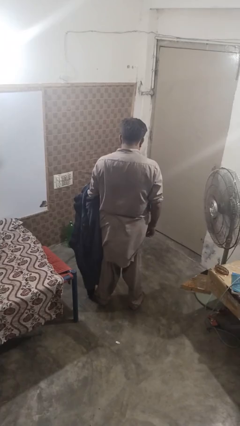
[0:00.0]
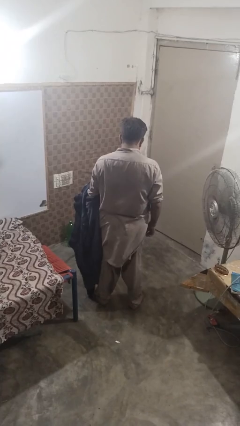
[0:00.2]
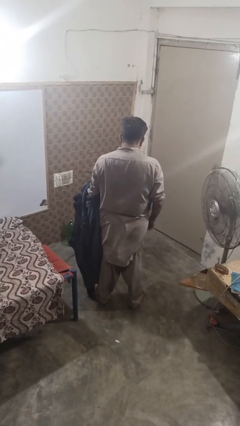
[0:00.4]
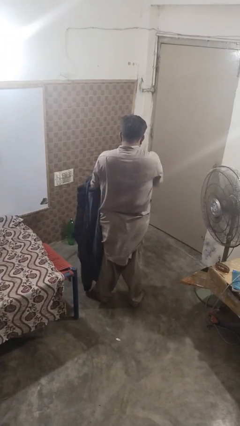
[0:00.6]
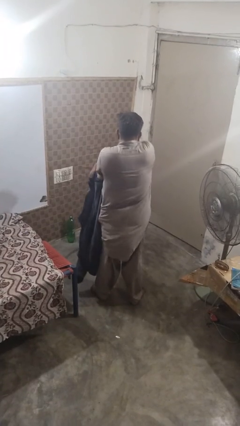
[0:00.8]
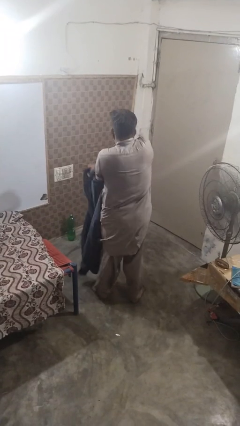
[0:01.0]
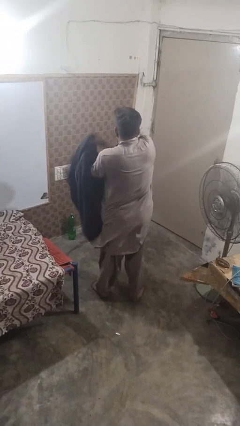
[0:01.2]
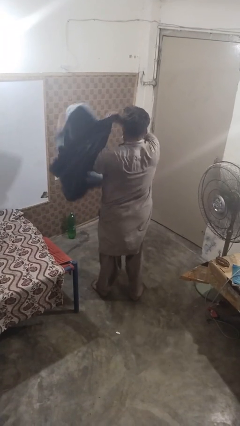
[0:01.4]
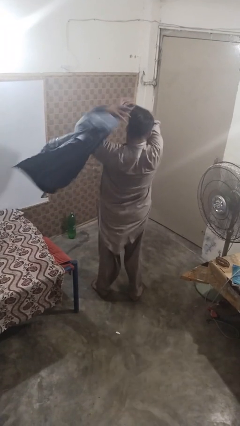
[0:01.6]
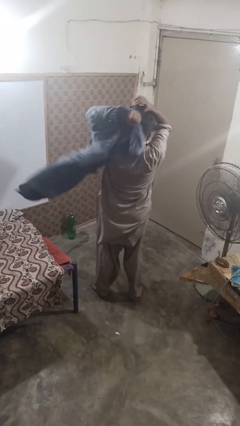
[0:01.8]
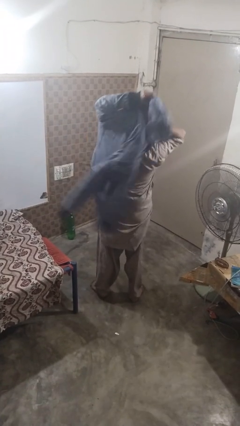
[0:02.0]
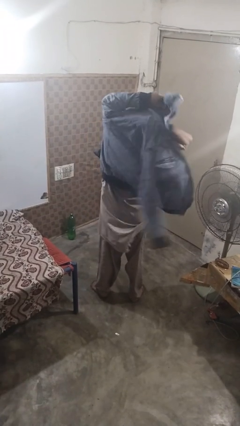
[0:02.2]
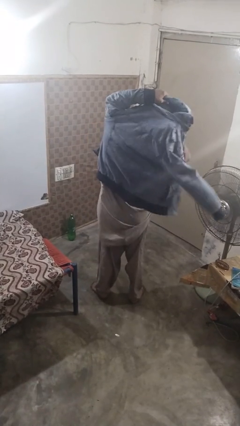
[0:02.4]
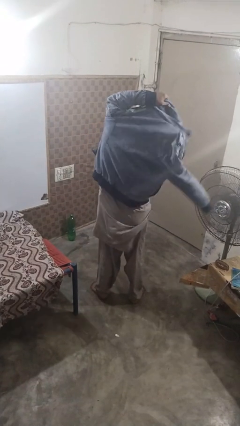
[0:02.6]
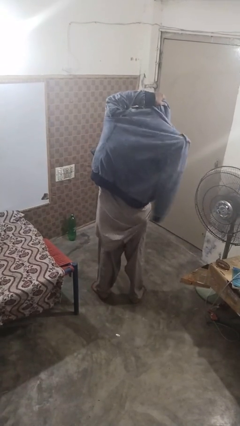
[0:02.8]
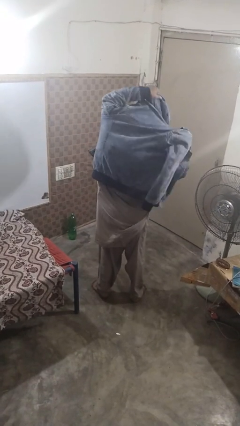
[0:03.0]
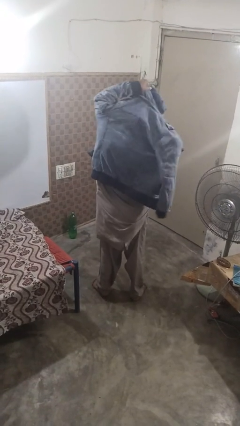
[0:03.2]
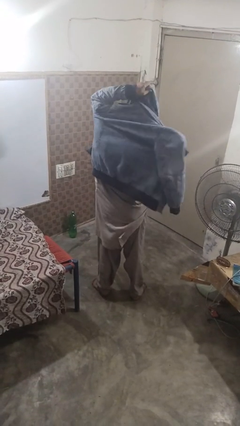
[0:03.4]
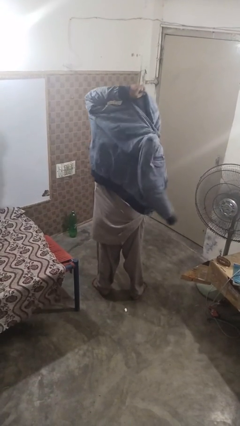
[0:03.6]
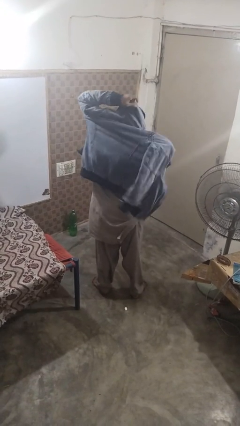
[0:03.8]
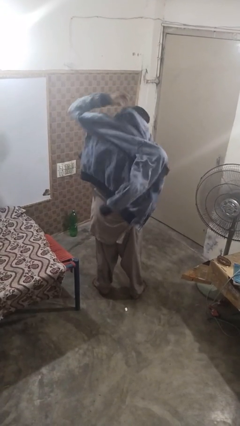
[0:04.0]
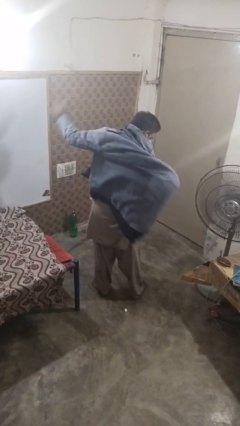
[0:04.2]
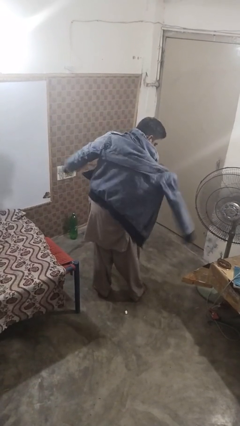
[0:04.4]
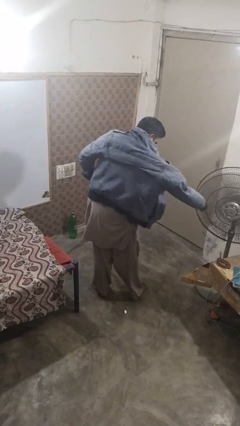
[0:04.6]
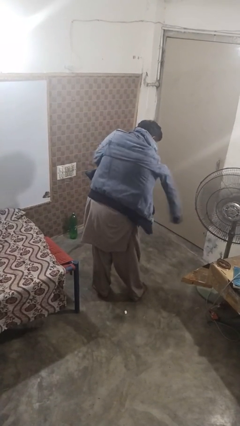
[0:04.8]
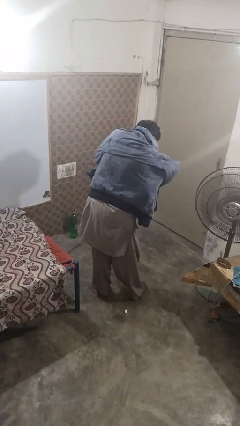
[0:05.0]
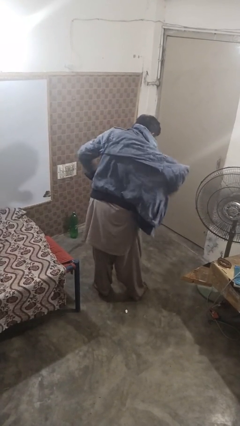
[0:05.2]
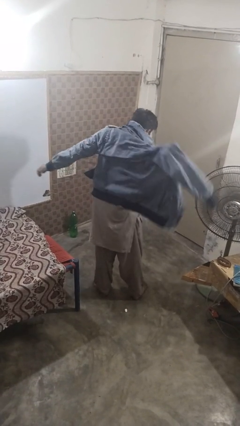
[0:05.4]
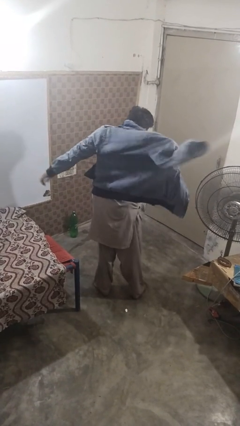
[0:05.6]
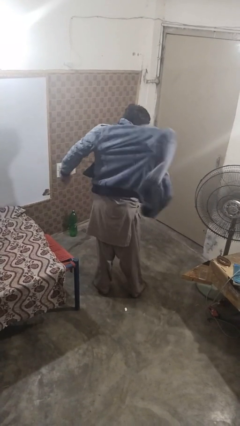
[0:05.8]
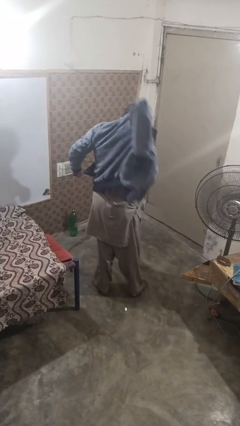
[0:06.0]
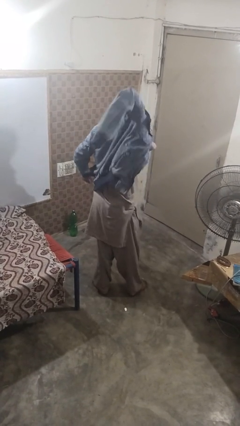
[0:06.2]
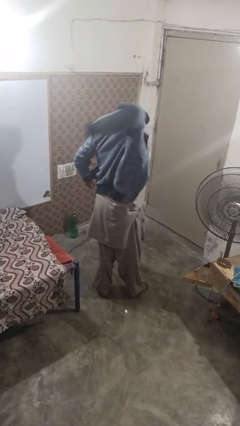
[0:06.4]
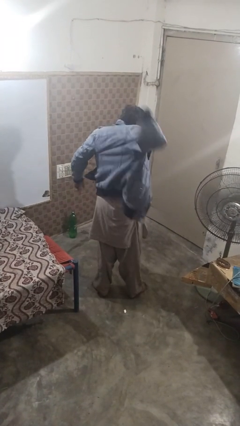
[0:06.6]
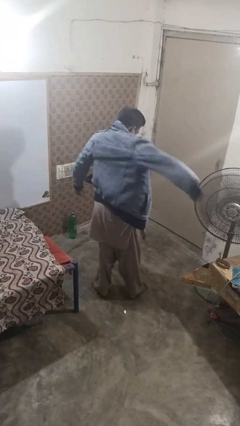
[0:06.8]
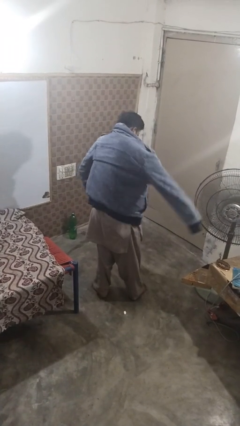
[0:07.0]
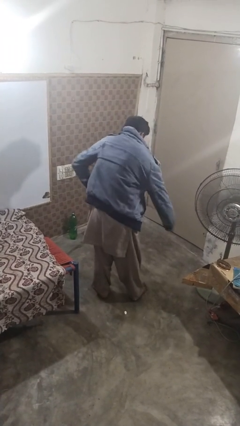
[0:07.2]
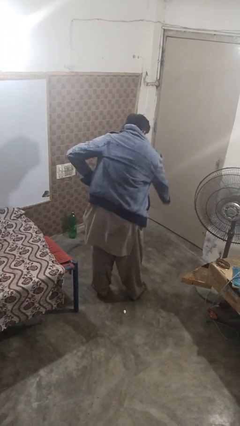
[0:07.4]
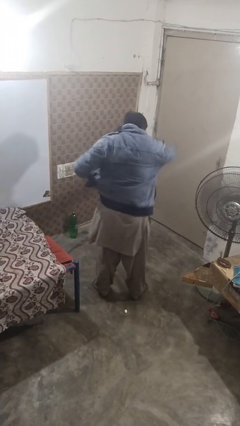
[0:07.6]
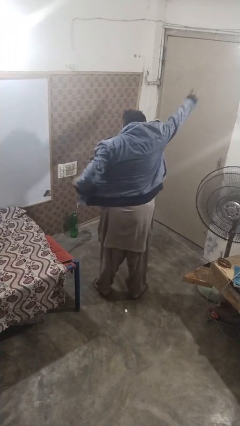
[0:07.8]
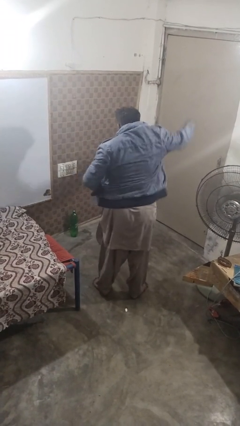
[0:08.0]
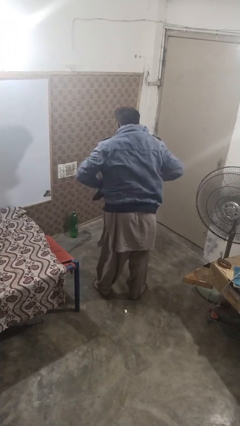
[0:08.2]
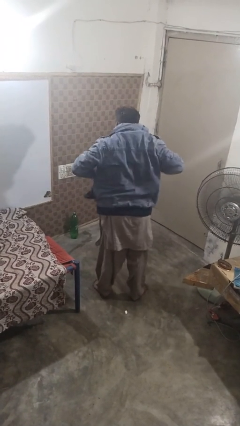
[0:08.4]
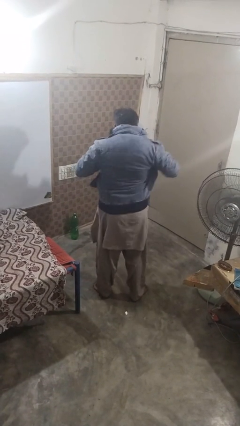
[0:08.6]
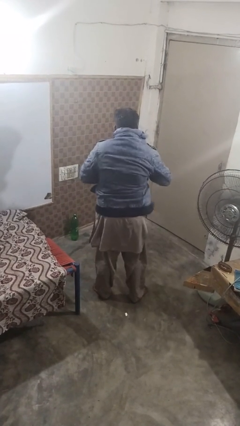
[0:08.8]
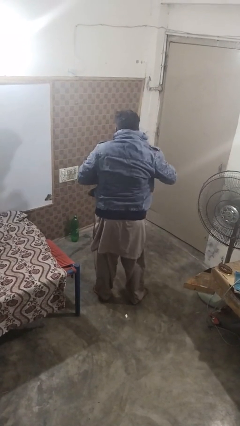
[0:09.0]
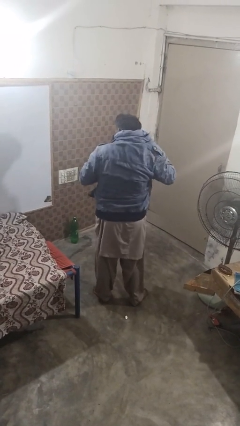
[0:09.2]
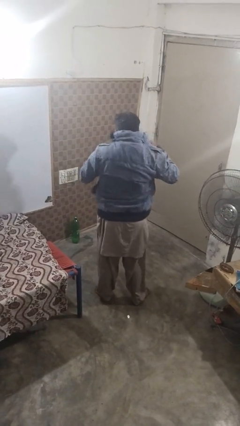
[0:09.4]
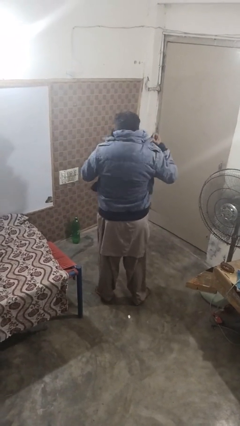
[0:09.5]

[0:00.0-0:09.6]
person puts on jacket

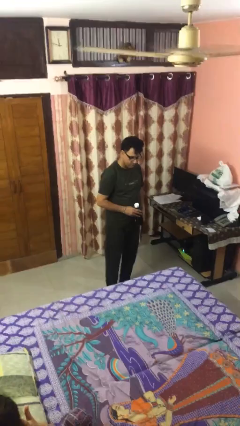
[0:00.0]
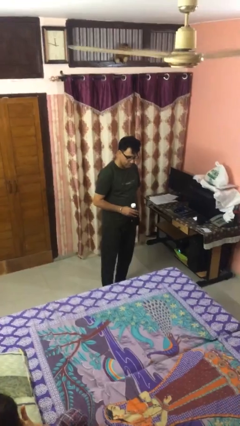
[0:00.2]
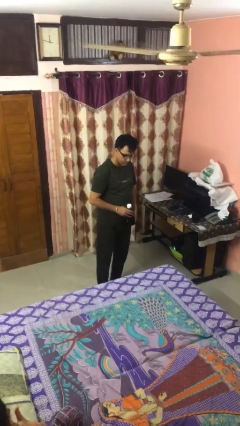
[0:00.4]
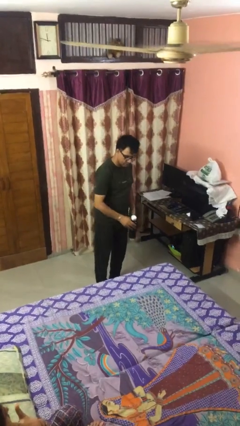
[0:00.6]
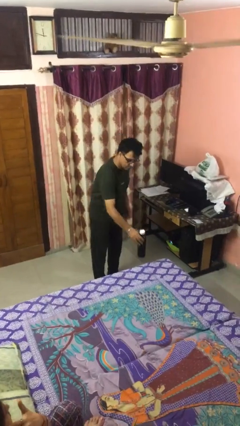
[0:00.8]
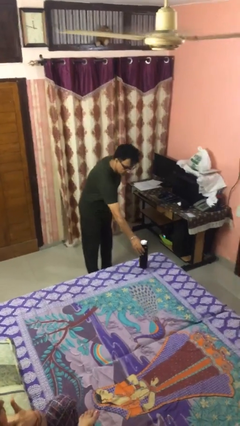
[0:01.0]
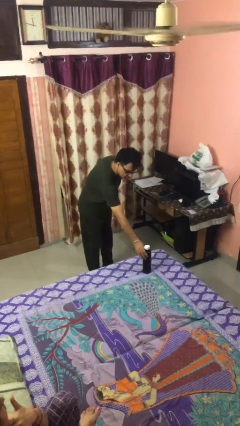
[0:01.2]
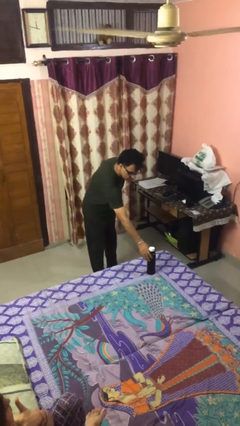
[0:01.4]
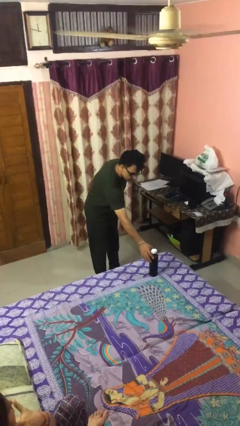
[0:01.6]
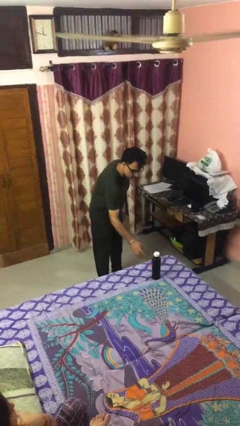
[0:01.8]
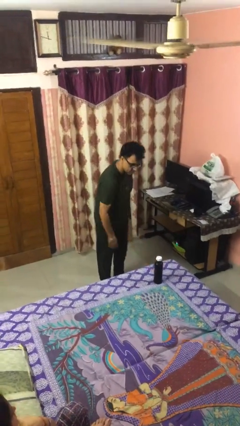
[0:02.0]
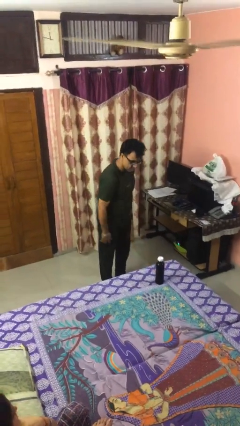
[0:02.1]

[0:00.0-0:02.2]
person puts down object on bed

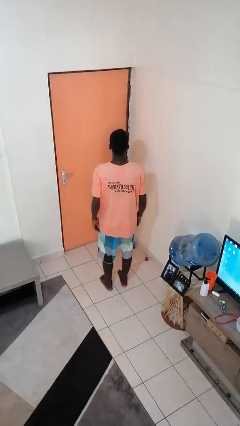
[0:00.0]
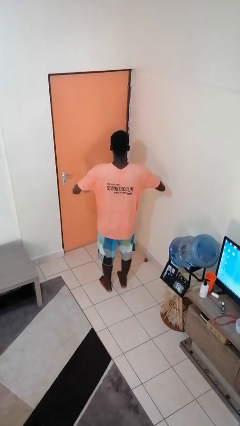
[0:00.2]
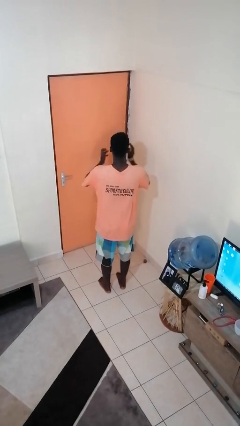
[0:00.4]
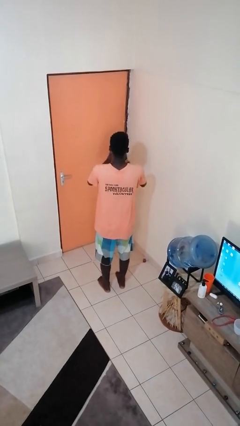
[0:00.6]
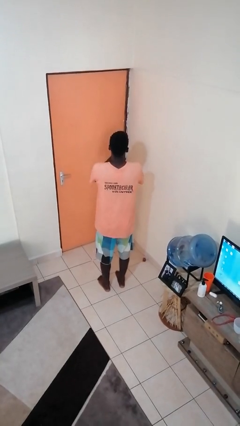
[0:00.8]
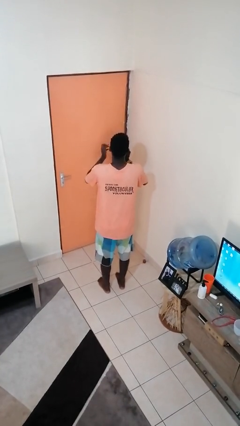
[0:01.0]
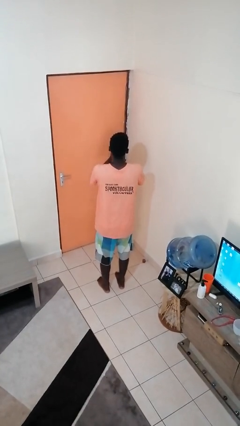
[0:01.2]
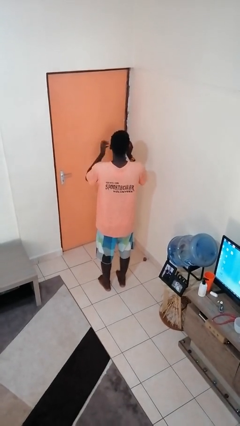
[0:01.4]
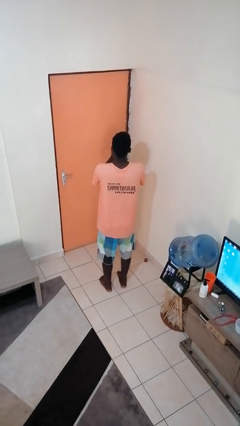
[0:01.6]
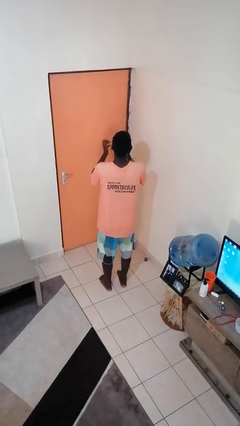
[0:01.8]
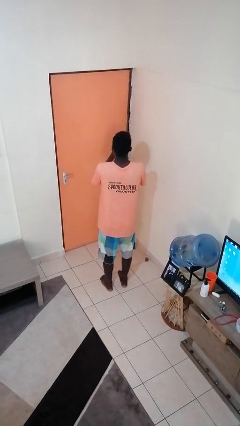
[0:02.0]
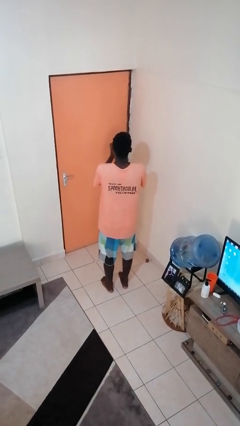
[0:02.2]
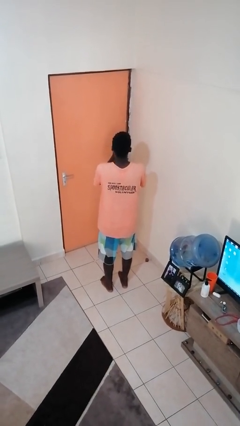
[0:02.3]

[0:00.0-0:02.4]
person claps hands

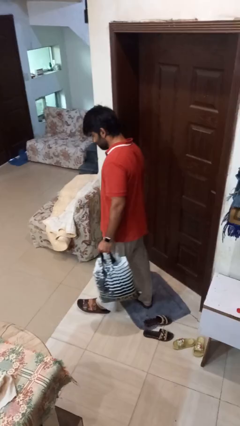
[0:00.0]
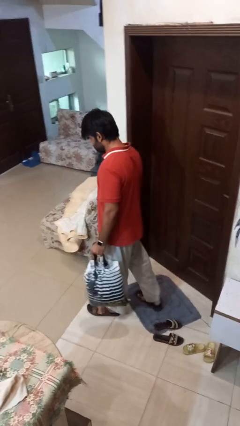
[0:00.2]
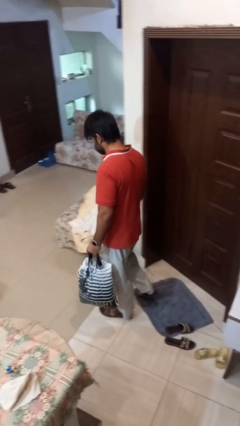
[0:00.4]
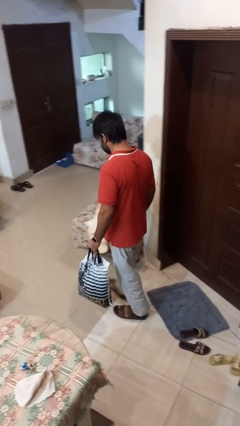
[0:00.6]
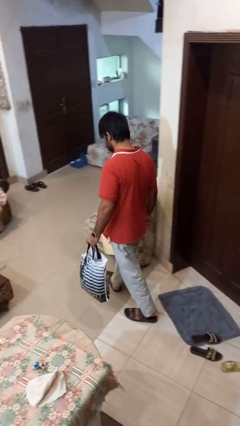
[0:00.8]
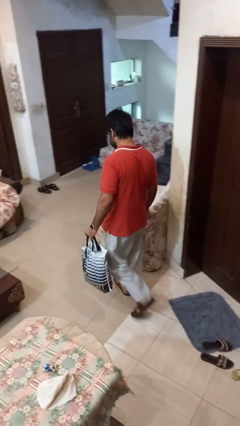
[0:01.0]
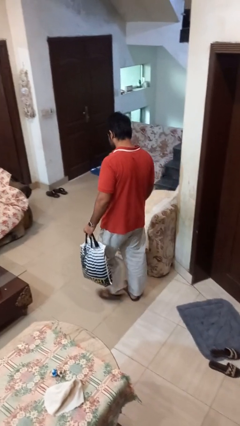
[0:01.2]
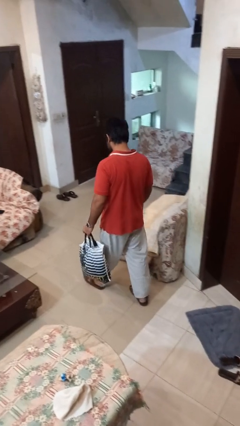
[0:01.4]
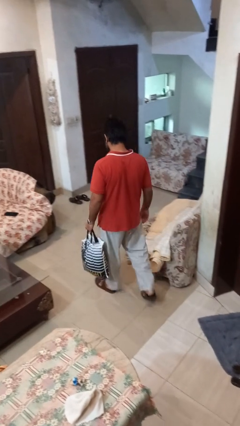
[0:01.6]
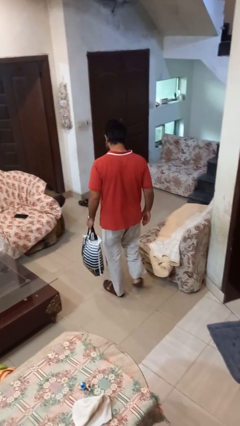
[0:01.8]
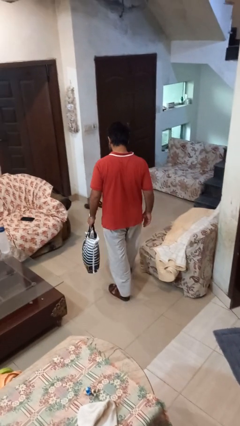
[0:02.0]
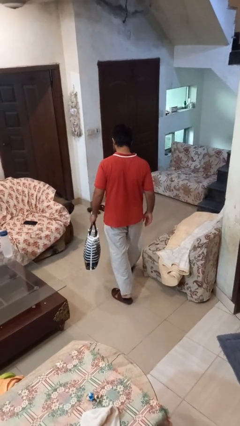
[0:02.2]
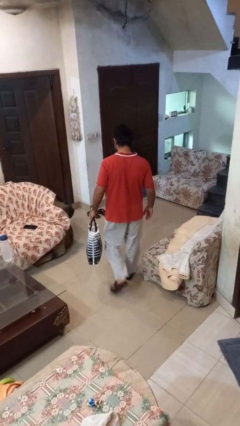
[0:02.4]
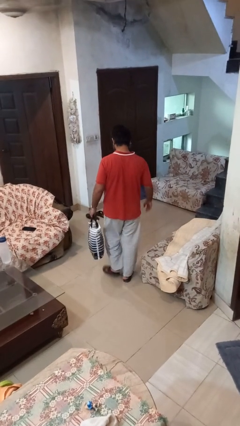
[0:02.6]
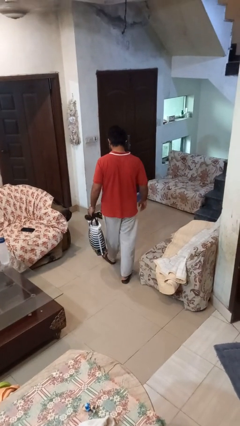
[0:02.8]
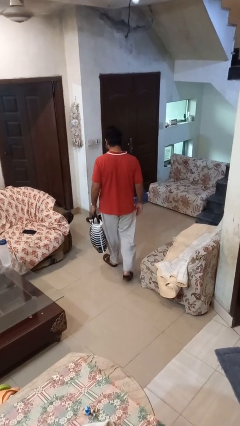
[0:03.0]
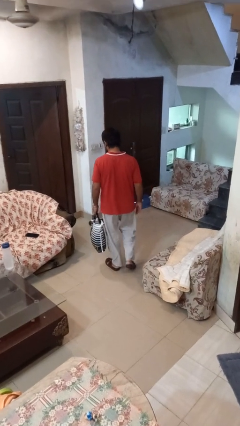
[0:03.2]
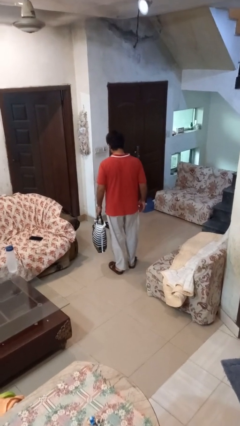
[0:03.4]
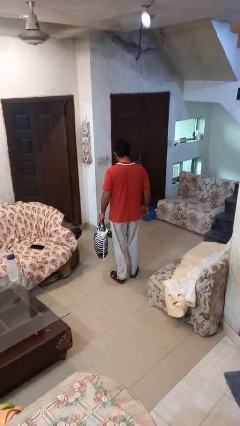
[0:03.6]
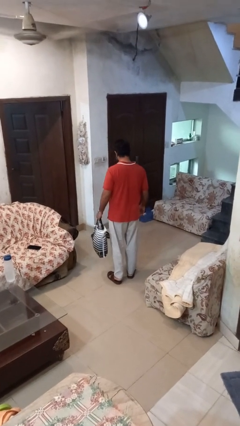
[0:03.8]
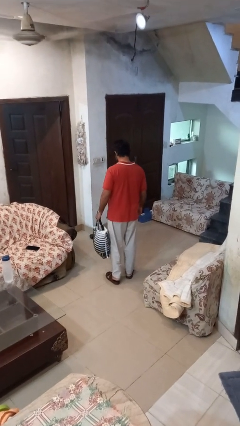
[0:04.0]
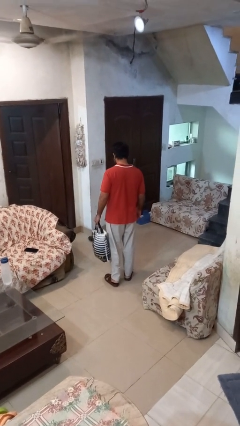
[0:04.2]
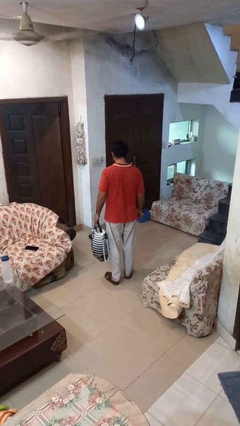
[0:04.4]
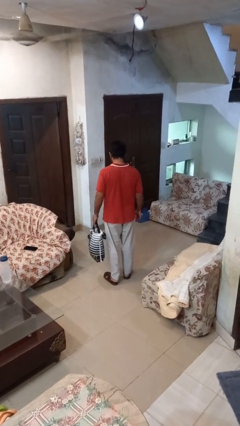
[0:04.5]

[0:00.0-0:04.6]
person carries groceries
